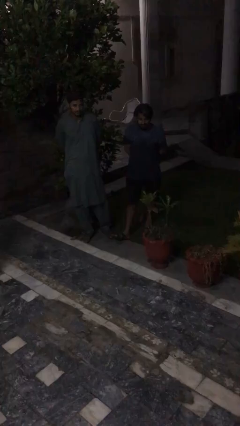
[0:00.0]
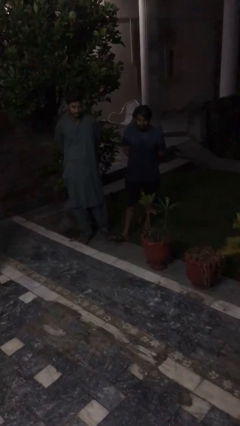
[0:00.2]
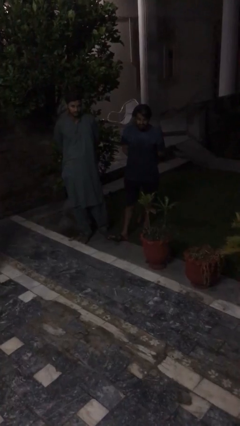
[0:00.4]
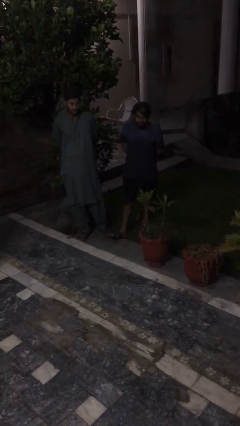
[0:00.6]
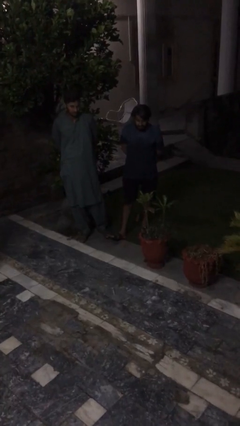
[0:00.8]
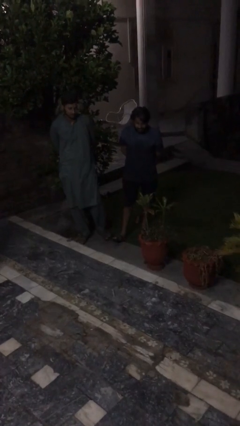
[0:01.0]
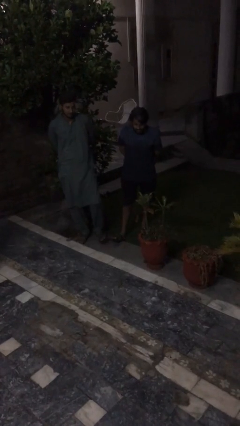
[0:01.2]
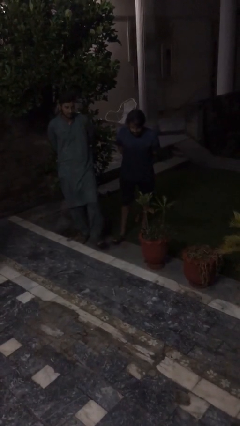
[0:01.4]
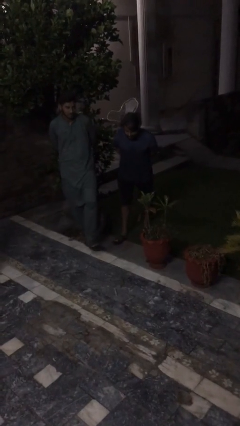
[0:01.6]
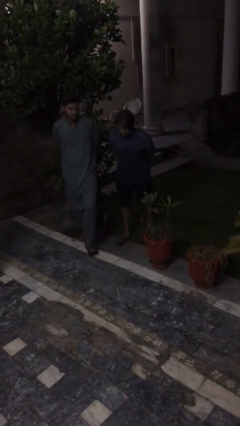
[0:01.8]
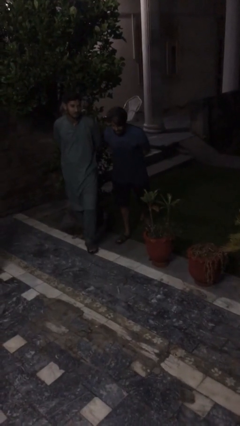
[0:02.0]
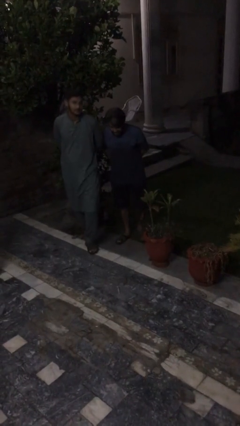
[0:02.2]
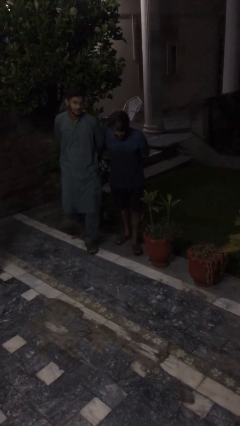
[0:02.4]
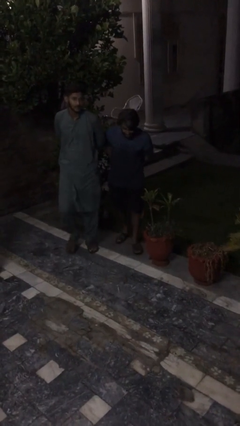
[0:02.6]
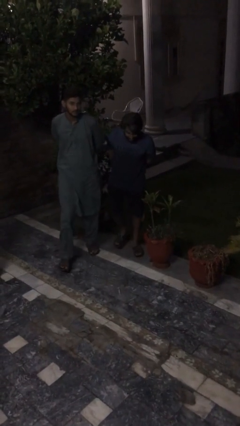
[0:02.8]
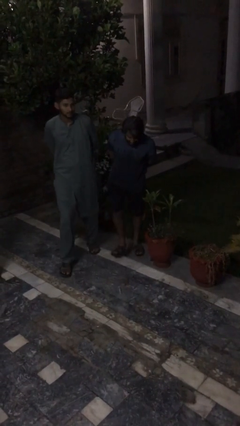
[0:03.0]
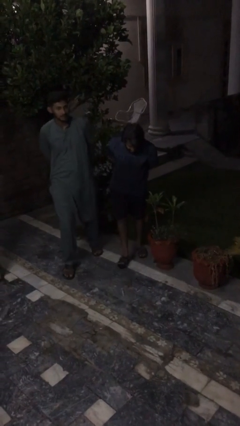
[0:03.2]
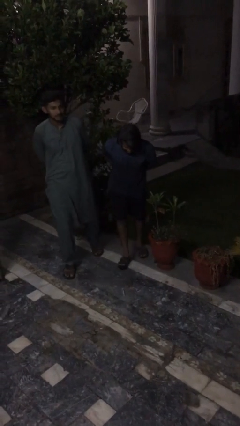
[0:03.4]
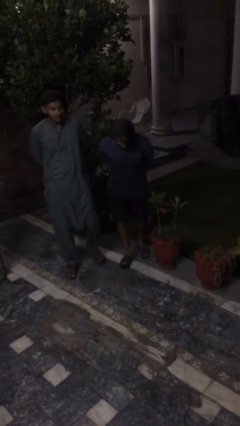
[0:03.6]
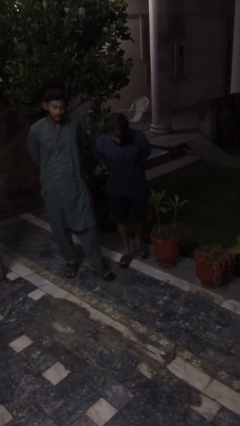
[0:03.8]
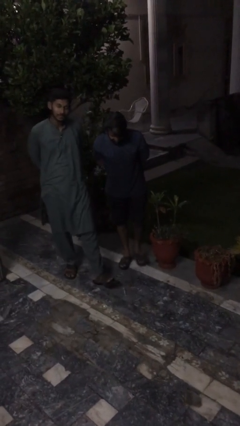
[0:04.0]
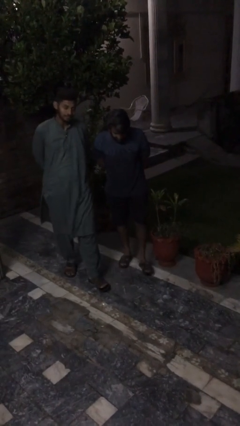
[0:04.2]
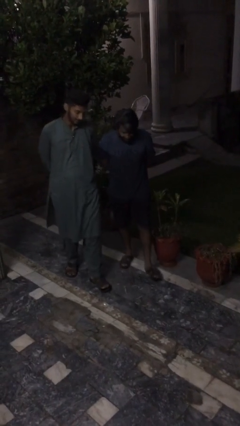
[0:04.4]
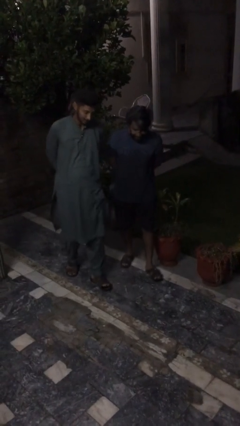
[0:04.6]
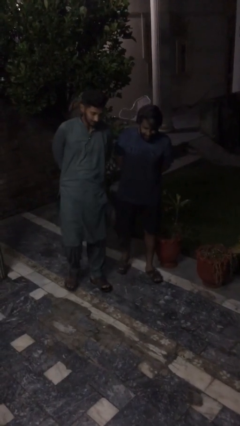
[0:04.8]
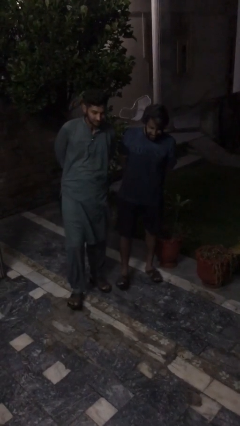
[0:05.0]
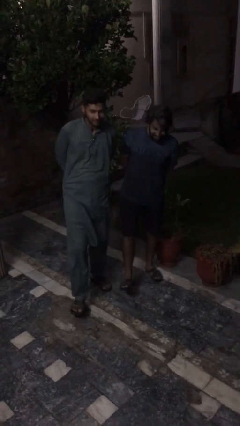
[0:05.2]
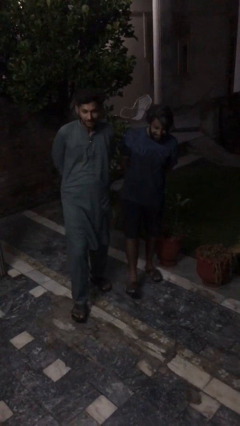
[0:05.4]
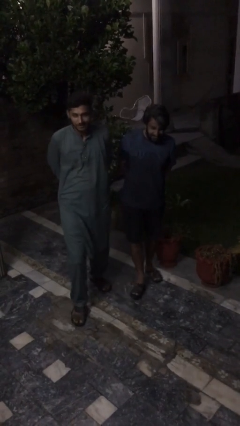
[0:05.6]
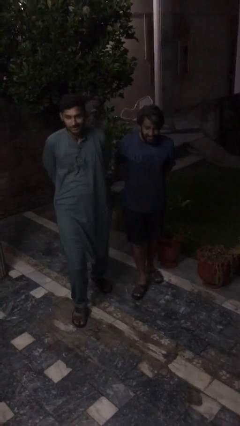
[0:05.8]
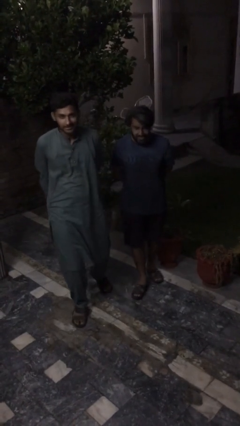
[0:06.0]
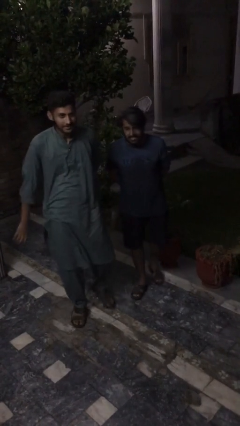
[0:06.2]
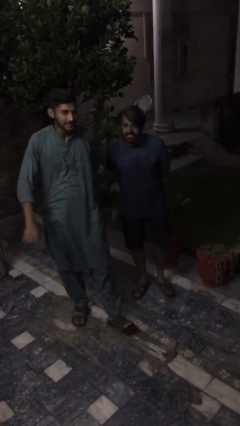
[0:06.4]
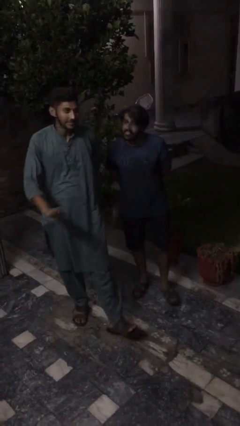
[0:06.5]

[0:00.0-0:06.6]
person talks to person

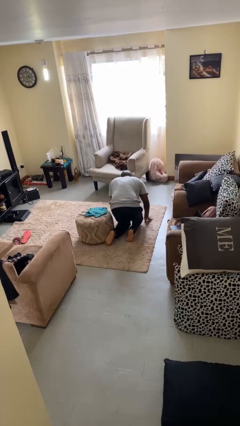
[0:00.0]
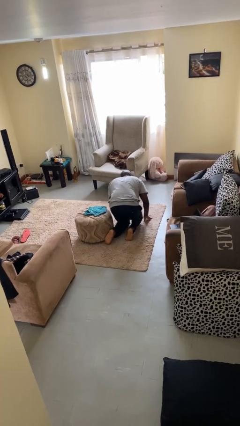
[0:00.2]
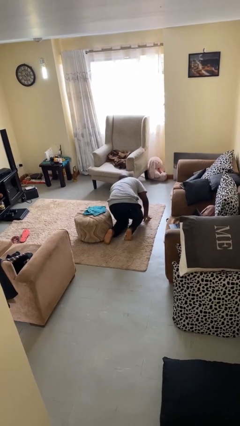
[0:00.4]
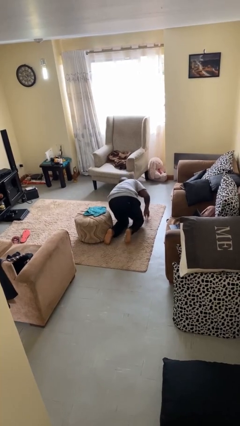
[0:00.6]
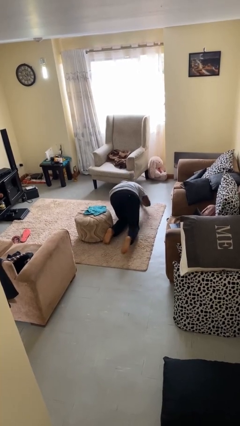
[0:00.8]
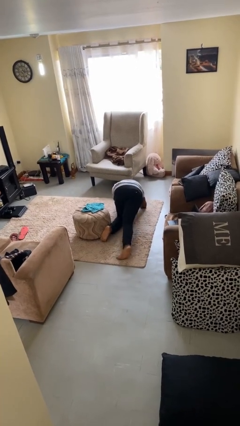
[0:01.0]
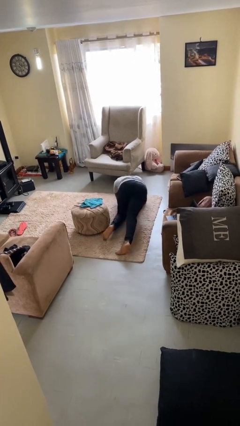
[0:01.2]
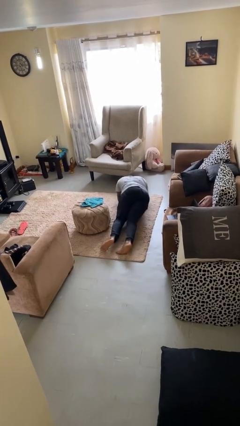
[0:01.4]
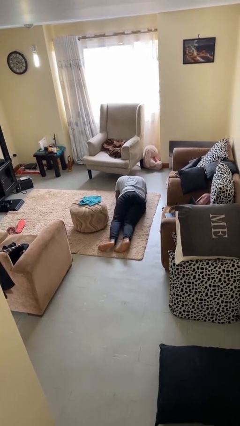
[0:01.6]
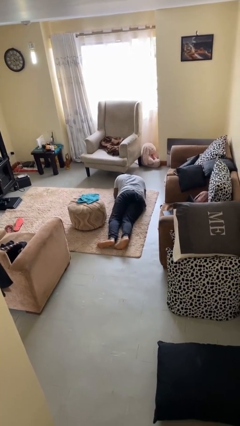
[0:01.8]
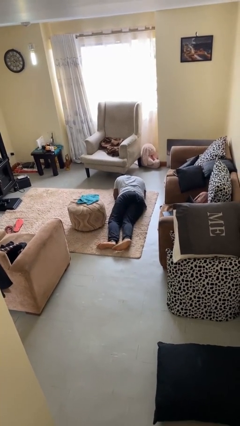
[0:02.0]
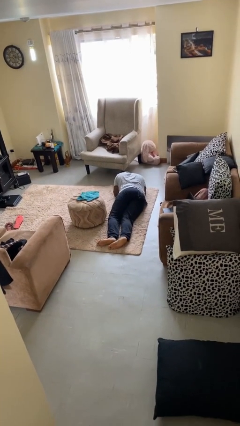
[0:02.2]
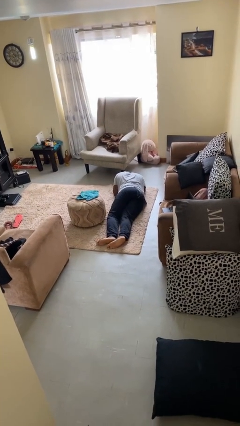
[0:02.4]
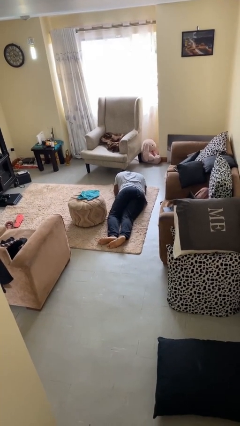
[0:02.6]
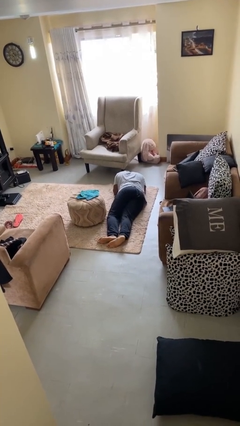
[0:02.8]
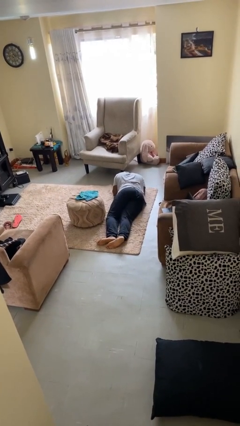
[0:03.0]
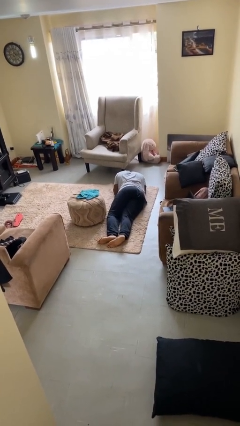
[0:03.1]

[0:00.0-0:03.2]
person lies down on floor

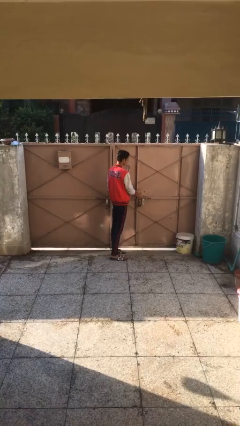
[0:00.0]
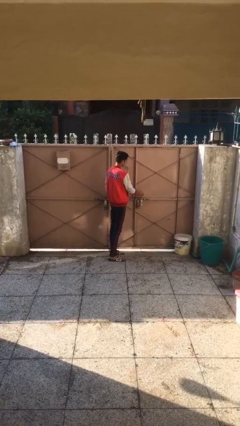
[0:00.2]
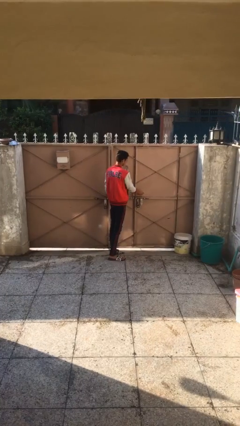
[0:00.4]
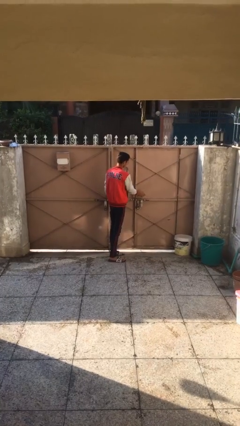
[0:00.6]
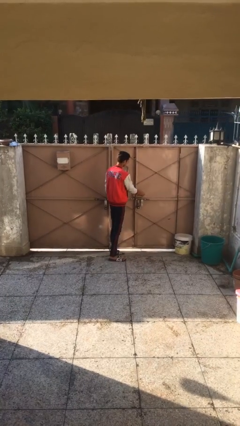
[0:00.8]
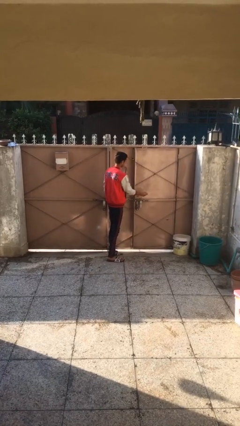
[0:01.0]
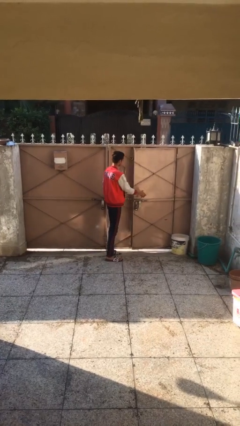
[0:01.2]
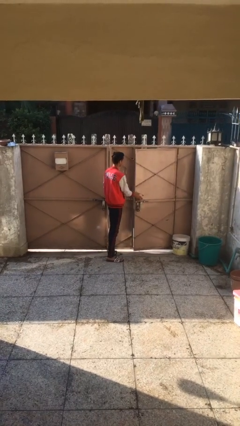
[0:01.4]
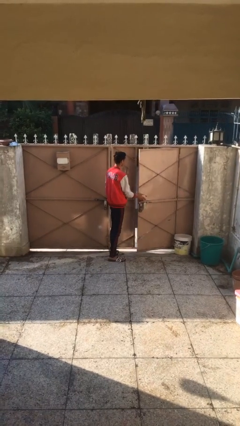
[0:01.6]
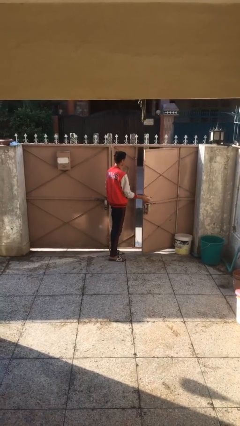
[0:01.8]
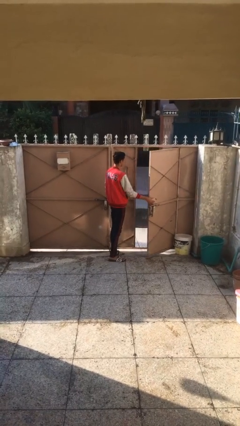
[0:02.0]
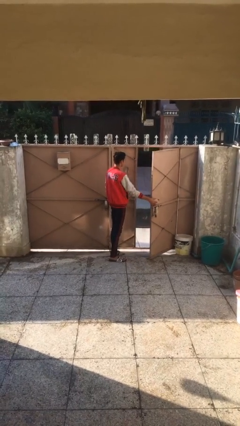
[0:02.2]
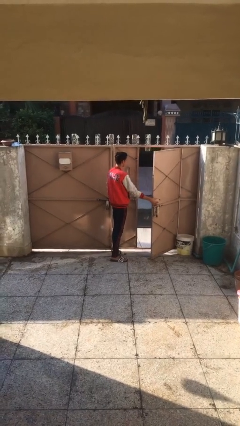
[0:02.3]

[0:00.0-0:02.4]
person opens facility door

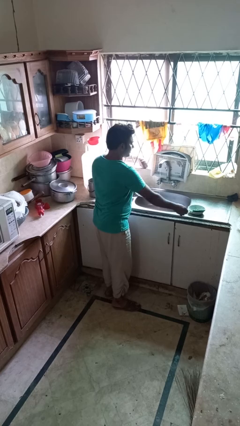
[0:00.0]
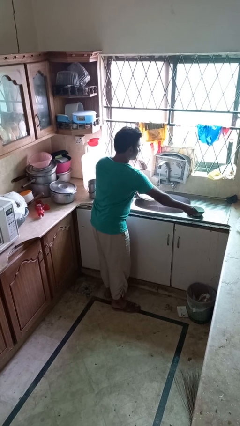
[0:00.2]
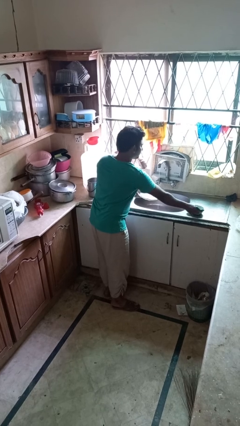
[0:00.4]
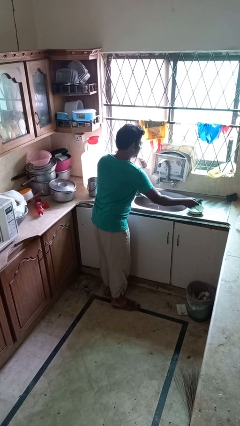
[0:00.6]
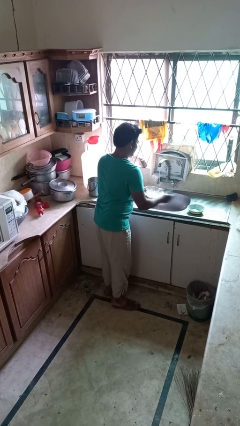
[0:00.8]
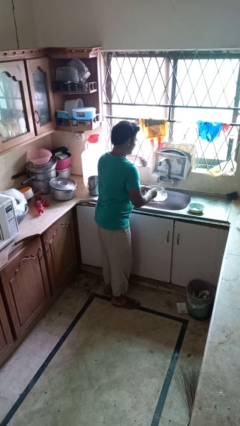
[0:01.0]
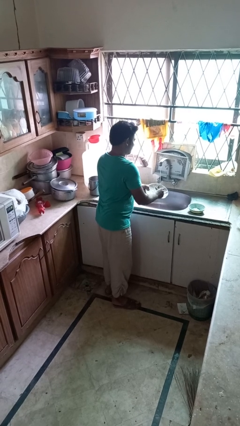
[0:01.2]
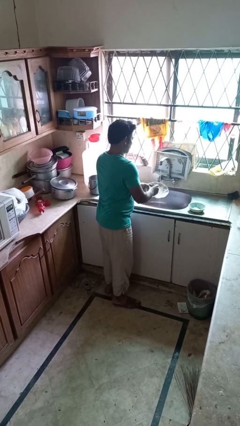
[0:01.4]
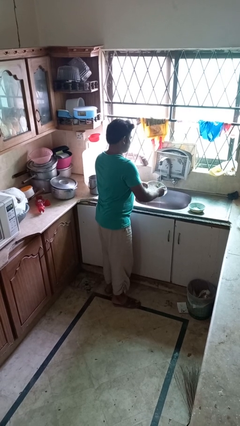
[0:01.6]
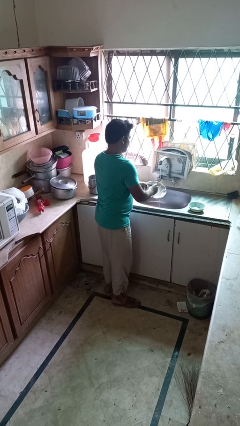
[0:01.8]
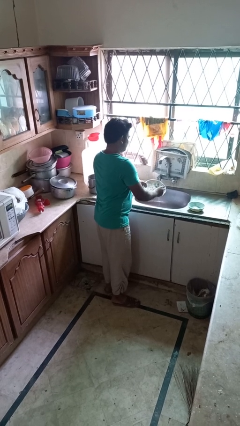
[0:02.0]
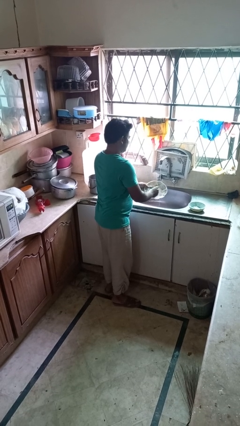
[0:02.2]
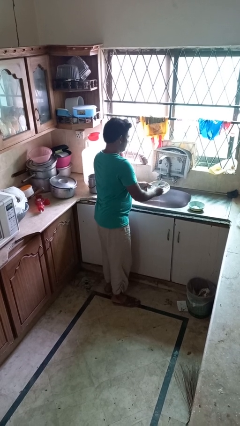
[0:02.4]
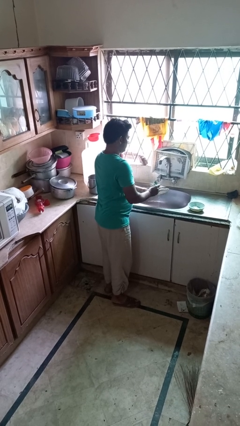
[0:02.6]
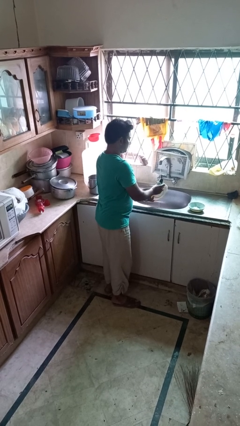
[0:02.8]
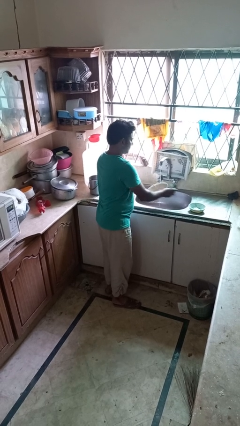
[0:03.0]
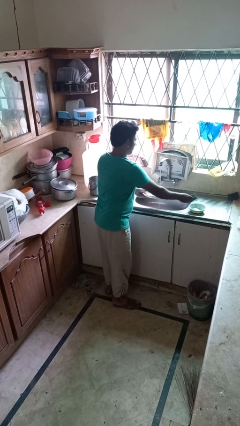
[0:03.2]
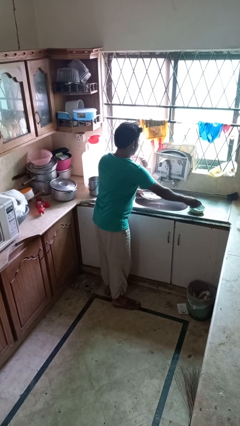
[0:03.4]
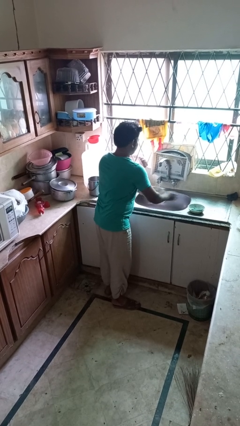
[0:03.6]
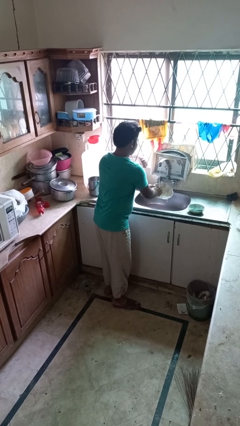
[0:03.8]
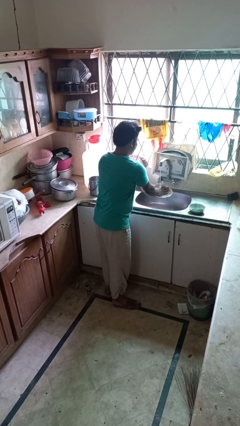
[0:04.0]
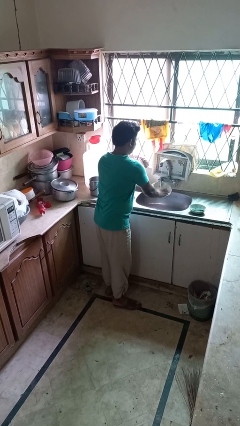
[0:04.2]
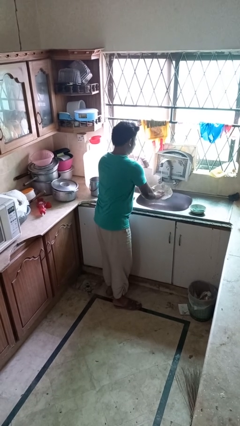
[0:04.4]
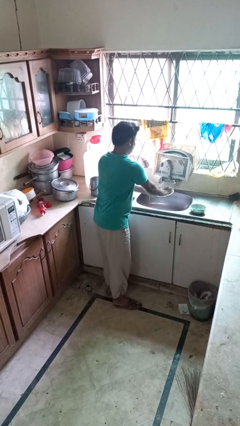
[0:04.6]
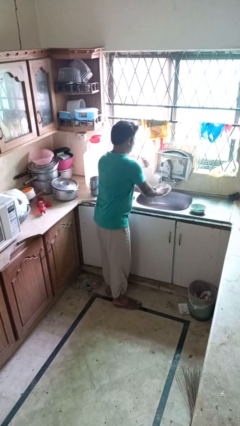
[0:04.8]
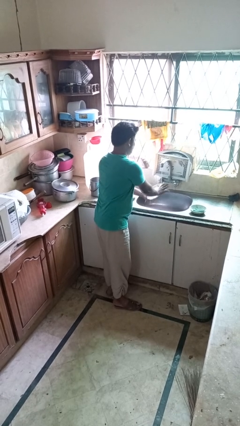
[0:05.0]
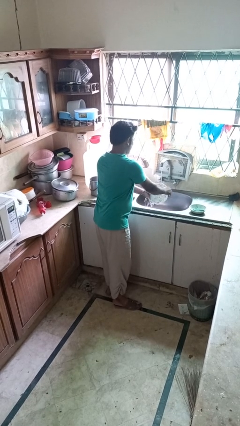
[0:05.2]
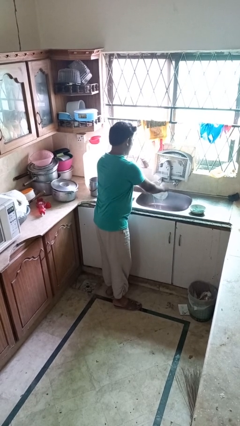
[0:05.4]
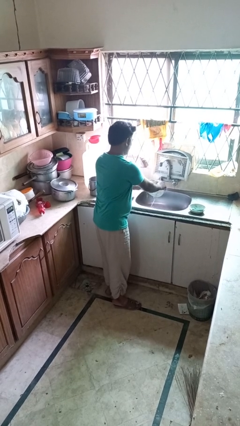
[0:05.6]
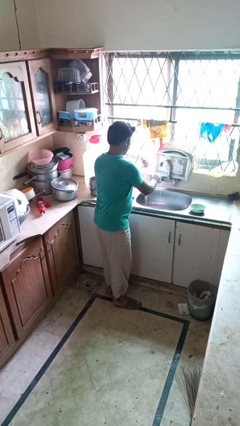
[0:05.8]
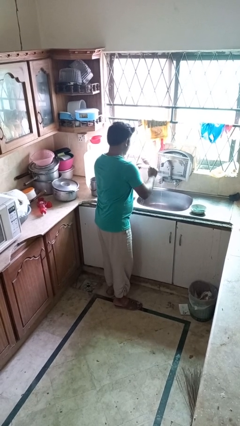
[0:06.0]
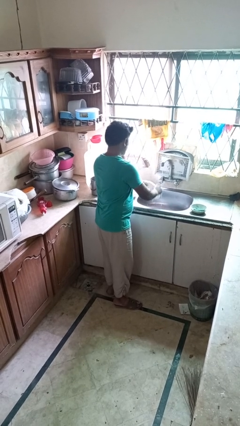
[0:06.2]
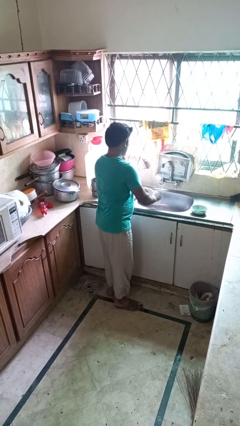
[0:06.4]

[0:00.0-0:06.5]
person washes dish
